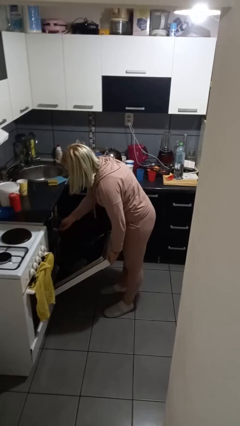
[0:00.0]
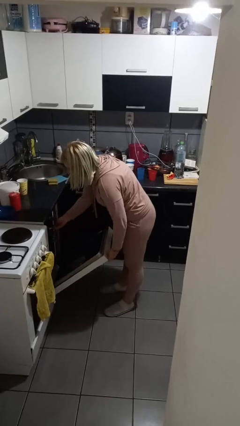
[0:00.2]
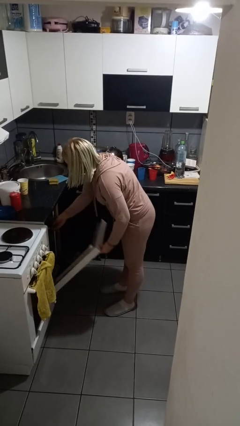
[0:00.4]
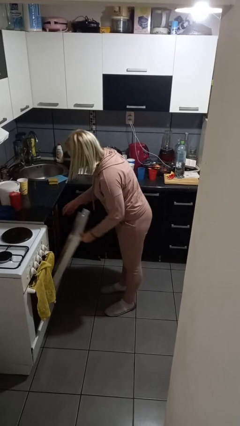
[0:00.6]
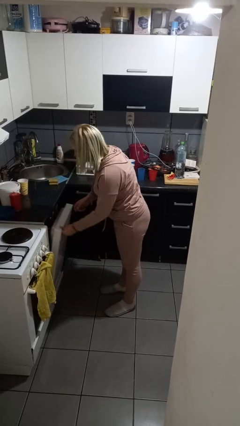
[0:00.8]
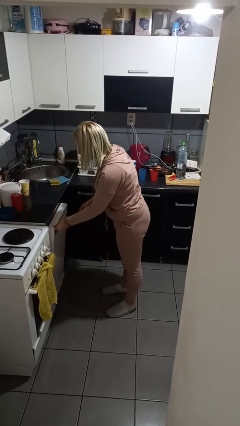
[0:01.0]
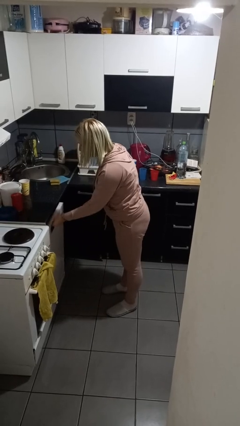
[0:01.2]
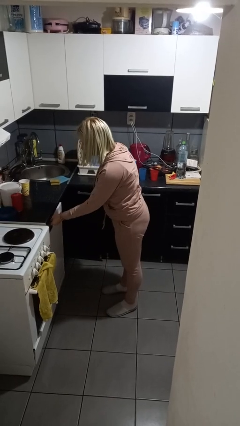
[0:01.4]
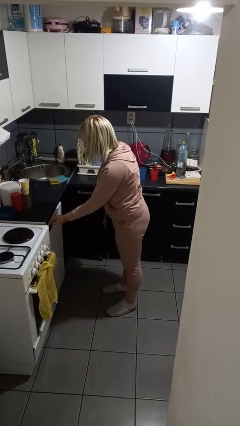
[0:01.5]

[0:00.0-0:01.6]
person closes dishwasher

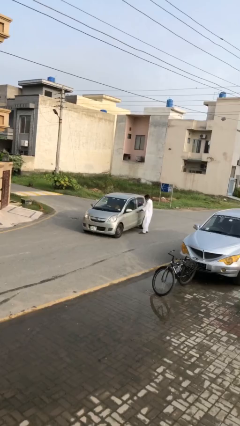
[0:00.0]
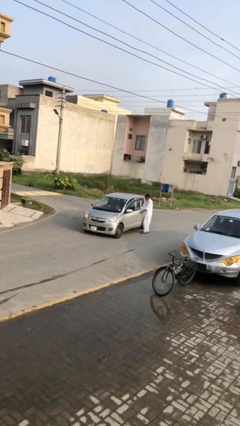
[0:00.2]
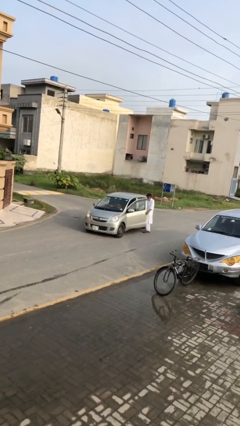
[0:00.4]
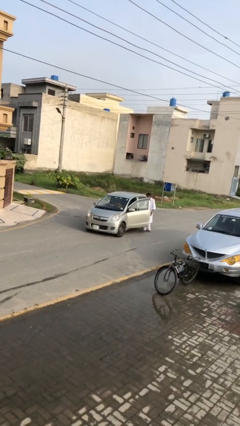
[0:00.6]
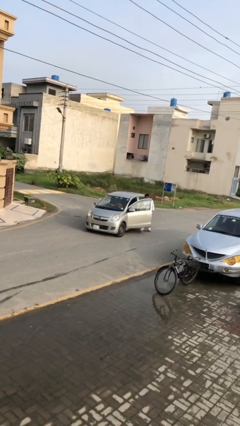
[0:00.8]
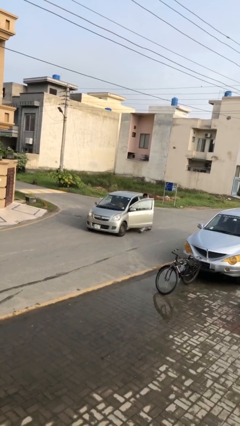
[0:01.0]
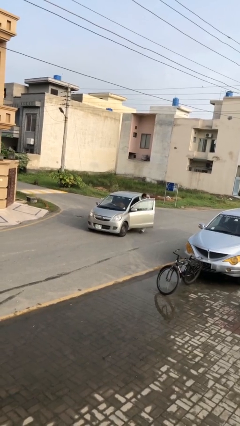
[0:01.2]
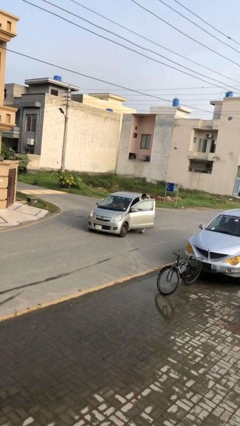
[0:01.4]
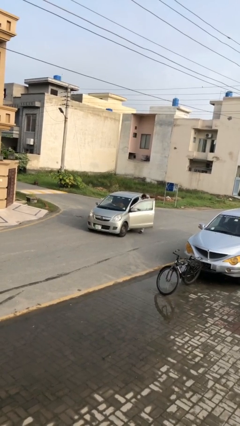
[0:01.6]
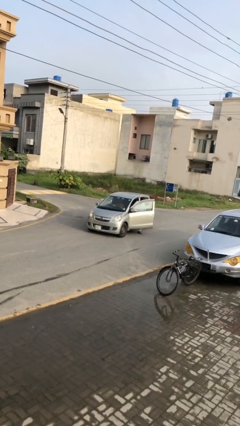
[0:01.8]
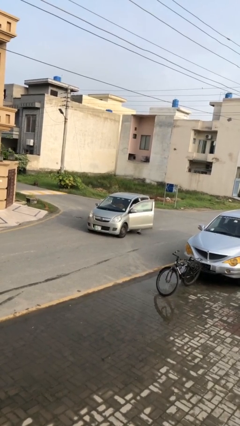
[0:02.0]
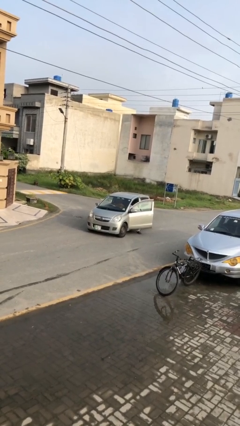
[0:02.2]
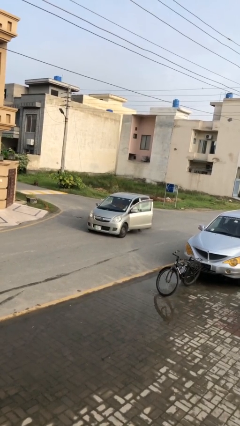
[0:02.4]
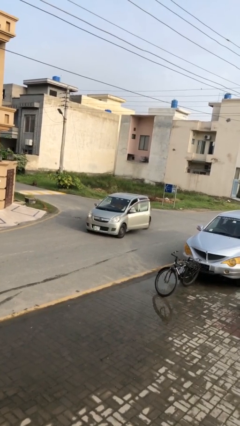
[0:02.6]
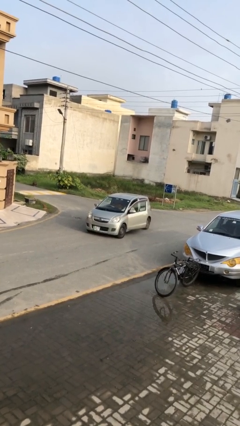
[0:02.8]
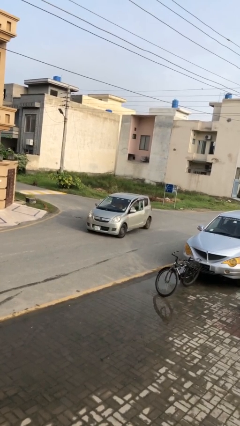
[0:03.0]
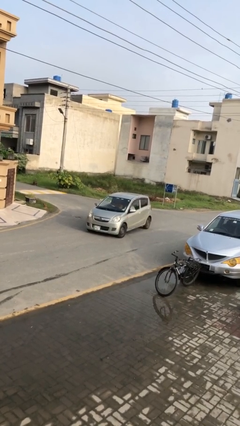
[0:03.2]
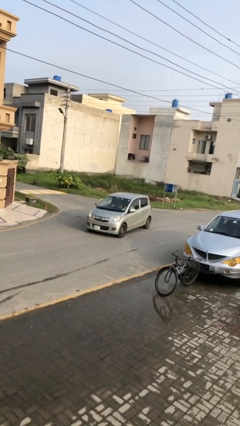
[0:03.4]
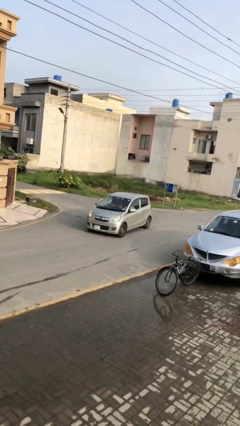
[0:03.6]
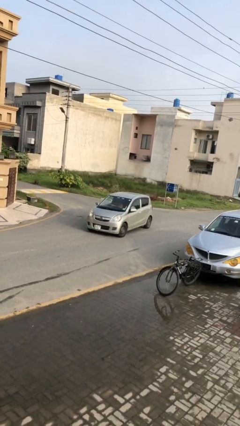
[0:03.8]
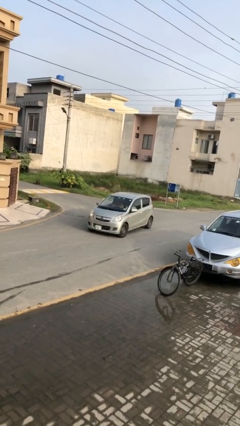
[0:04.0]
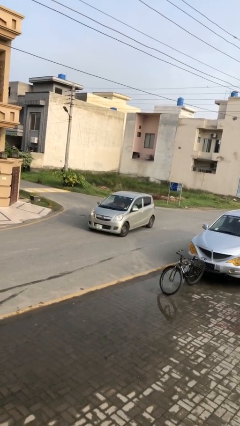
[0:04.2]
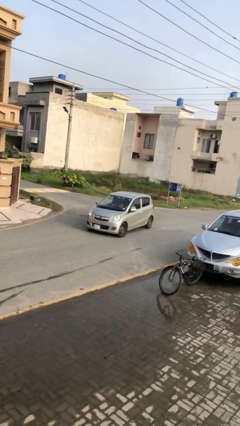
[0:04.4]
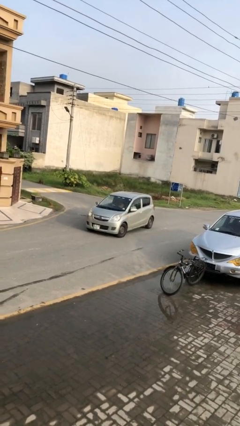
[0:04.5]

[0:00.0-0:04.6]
car picks up person

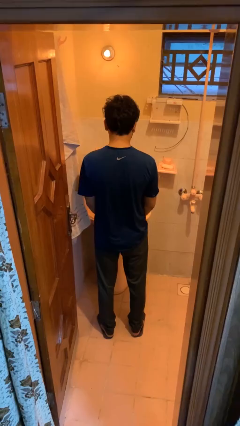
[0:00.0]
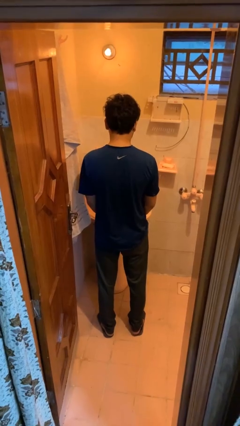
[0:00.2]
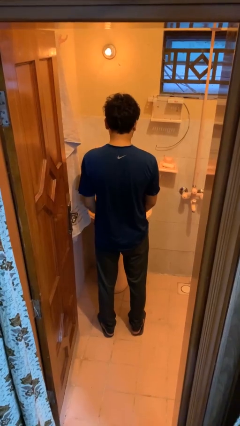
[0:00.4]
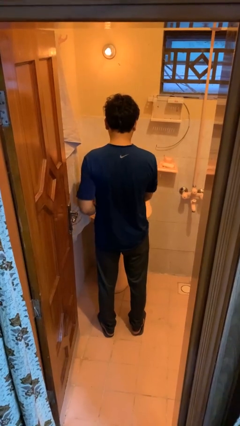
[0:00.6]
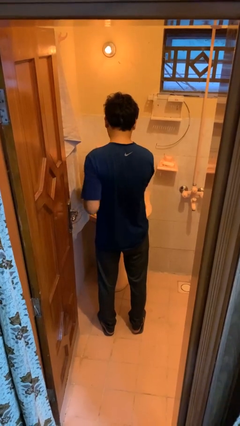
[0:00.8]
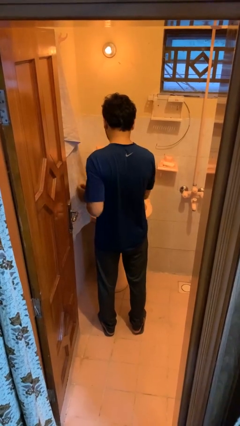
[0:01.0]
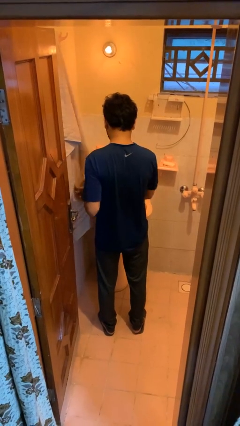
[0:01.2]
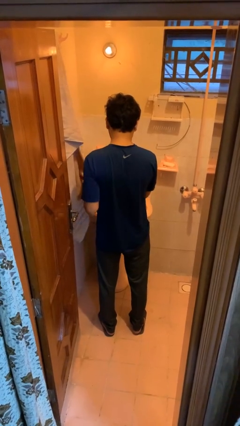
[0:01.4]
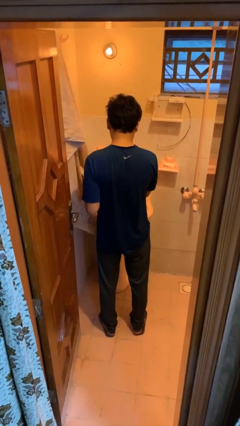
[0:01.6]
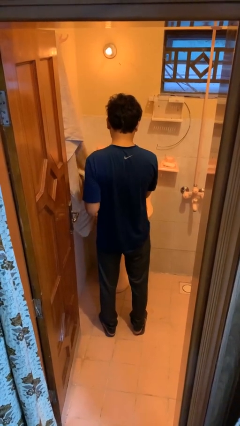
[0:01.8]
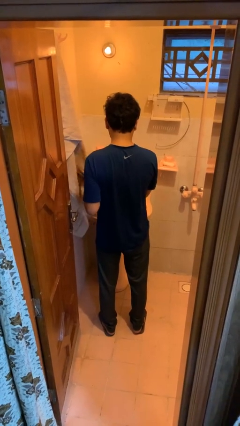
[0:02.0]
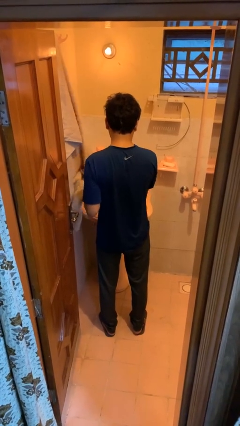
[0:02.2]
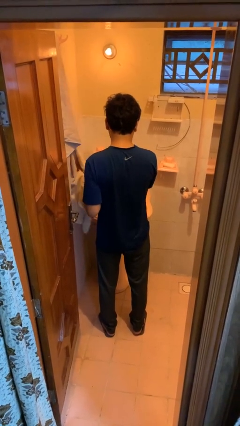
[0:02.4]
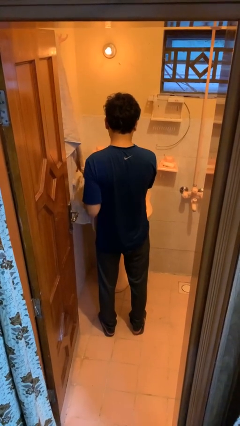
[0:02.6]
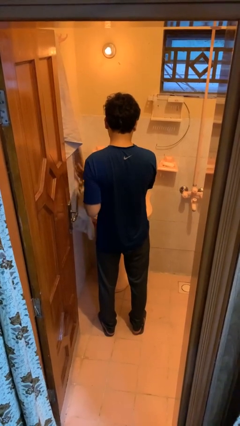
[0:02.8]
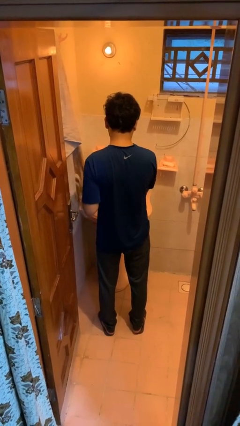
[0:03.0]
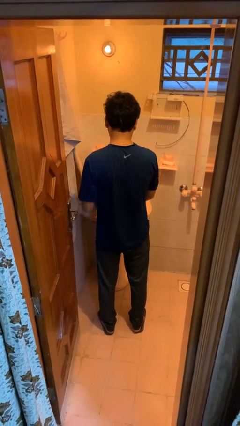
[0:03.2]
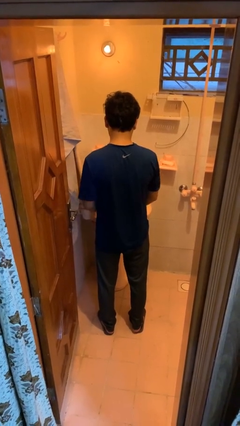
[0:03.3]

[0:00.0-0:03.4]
person dries hands with towel

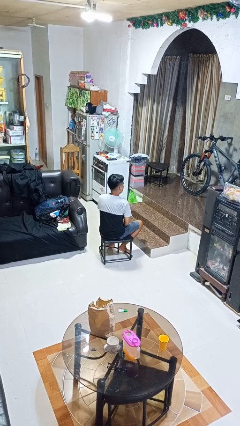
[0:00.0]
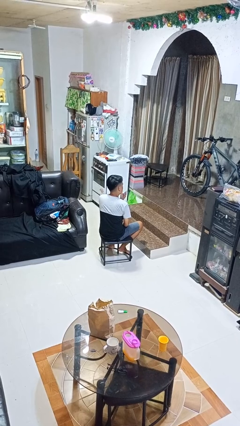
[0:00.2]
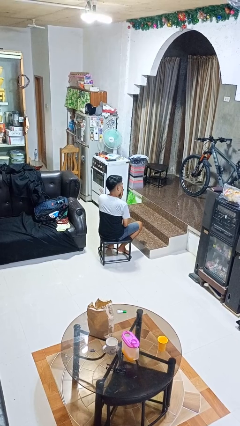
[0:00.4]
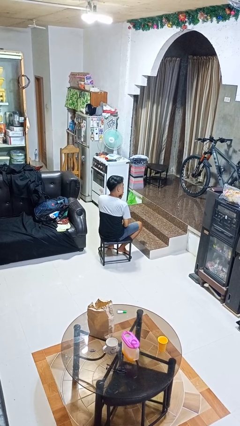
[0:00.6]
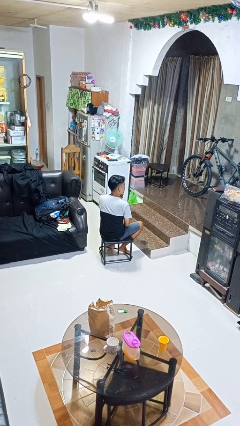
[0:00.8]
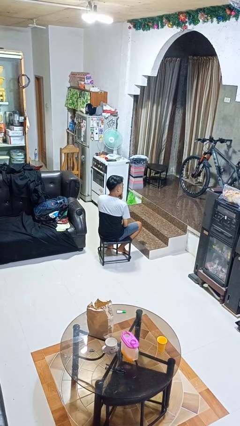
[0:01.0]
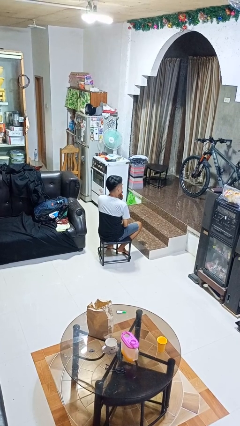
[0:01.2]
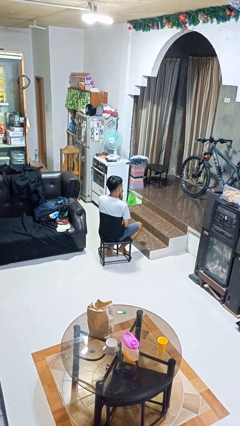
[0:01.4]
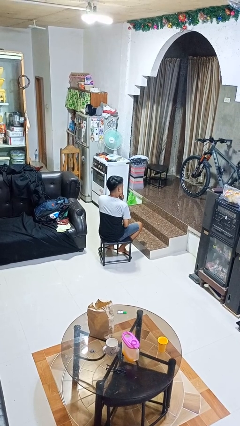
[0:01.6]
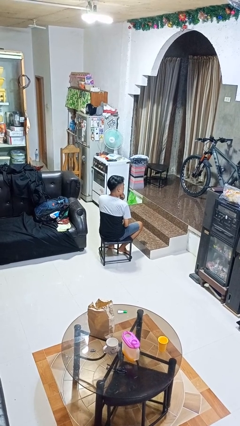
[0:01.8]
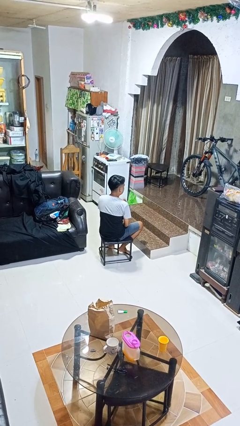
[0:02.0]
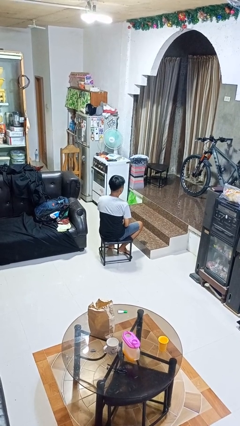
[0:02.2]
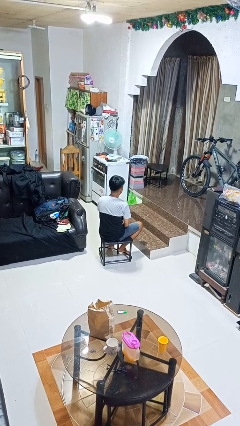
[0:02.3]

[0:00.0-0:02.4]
person strokes chin

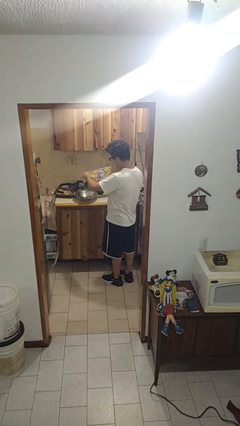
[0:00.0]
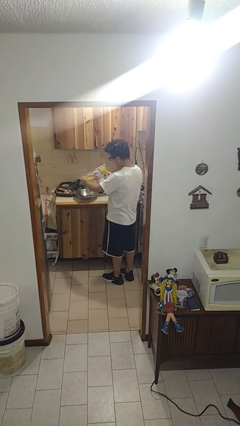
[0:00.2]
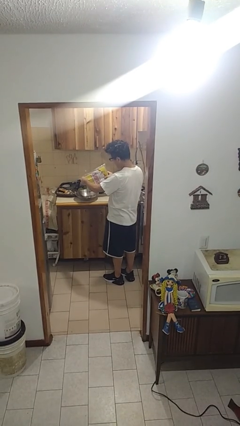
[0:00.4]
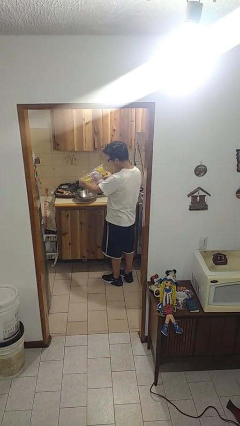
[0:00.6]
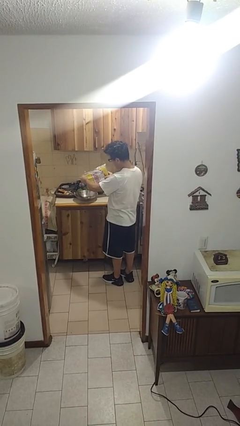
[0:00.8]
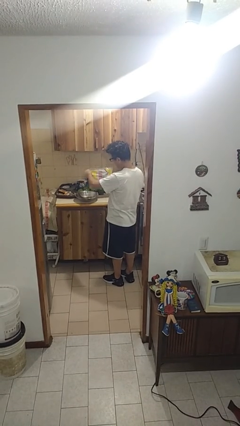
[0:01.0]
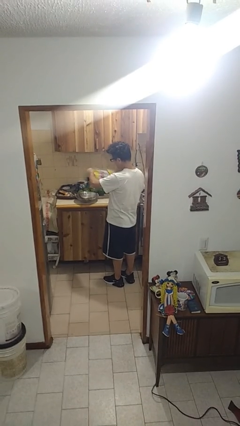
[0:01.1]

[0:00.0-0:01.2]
person pours into bowl

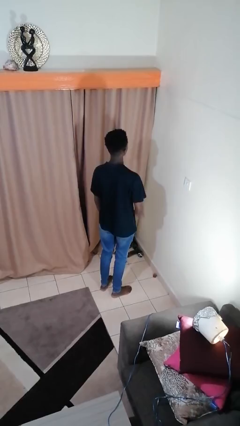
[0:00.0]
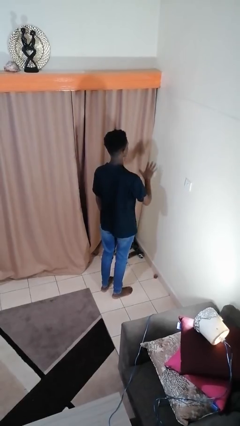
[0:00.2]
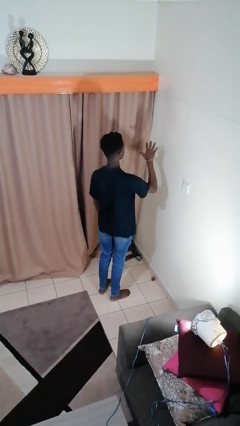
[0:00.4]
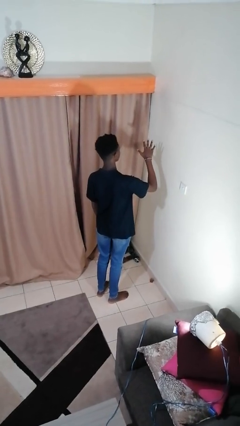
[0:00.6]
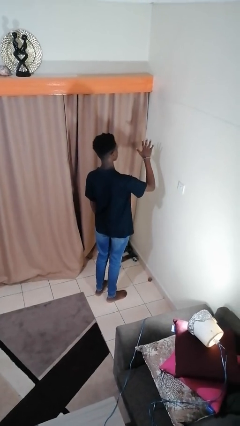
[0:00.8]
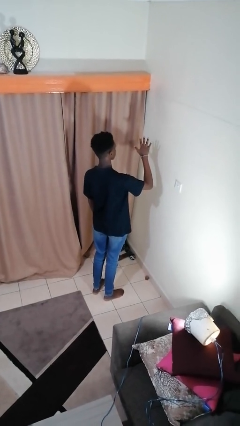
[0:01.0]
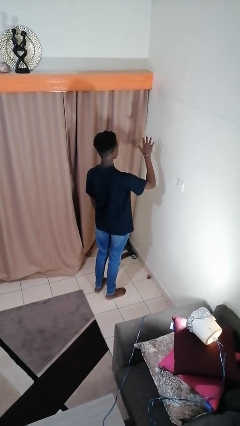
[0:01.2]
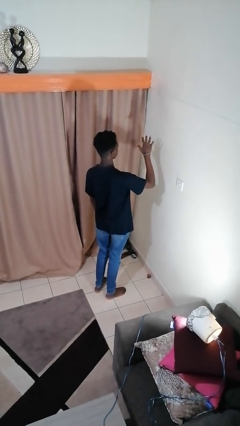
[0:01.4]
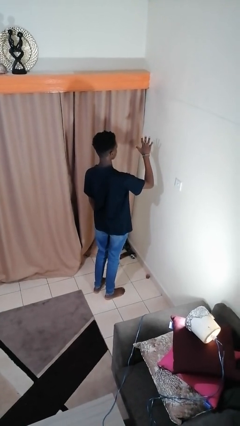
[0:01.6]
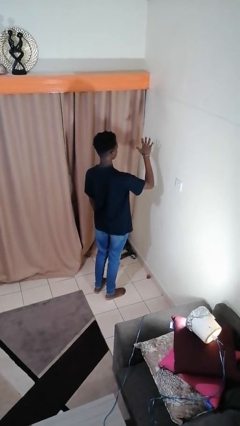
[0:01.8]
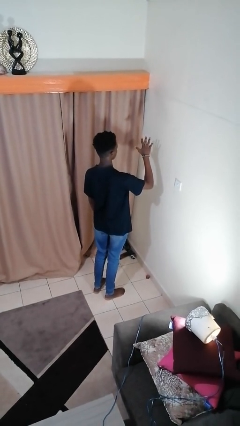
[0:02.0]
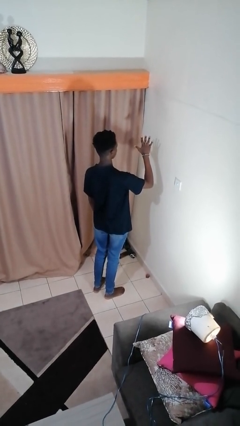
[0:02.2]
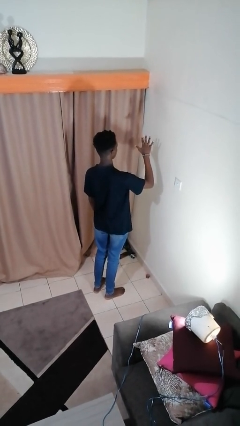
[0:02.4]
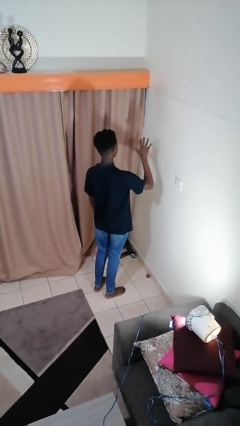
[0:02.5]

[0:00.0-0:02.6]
person gestures number five

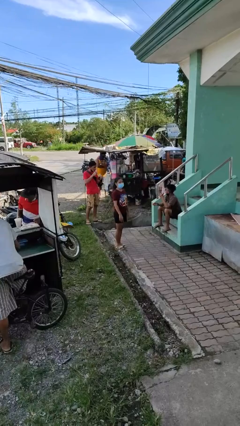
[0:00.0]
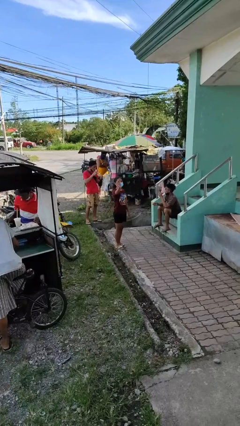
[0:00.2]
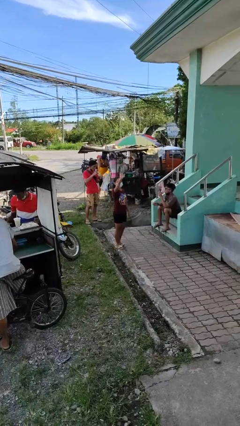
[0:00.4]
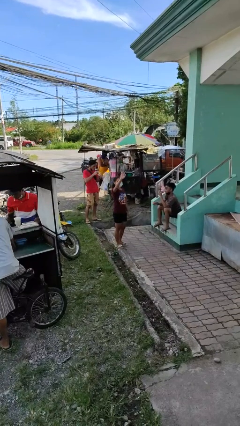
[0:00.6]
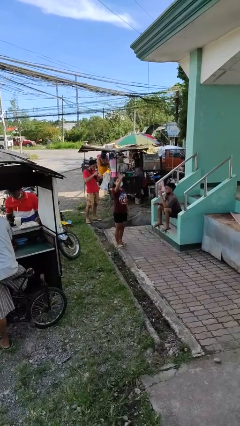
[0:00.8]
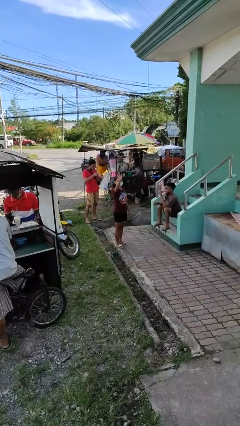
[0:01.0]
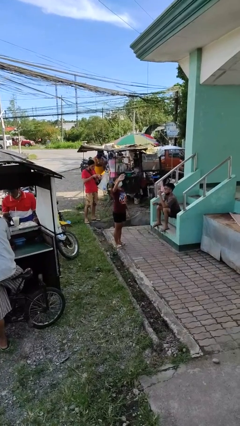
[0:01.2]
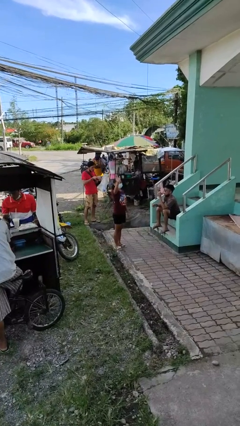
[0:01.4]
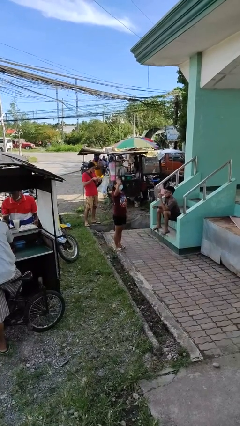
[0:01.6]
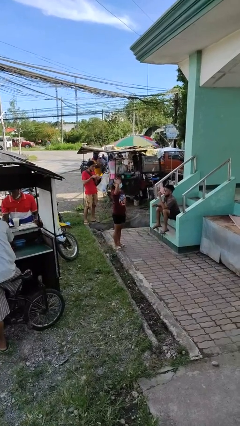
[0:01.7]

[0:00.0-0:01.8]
person waves at person
